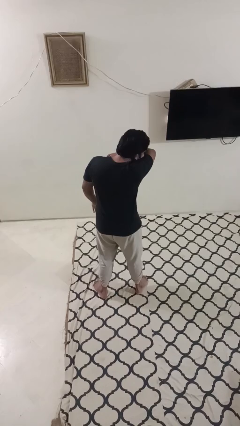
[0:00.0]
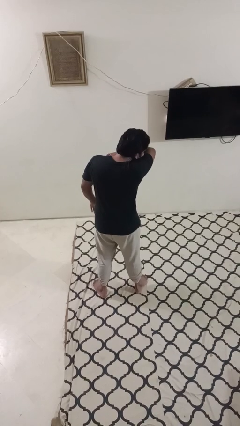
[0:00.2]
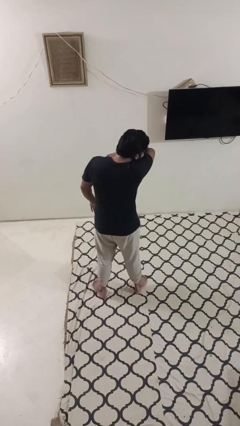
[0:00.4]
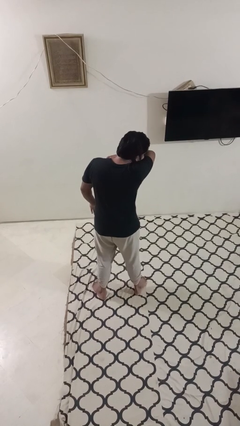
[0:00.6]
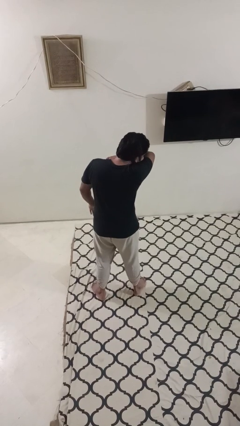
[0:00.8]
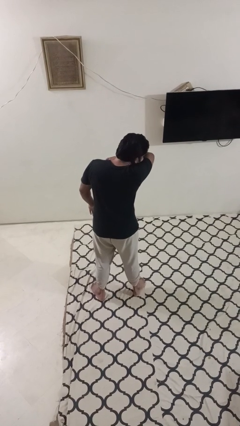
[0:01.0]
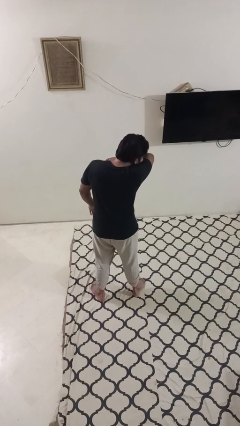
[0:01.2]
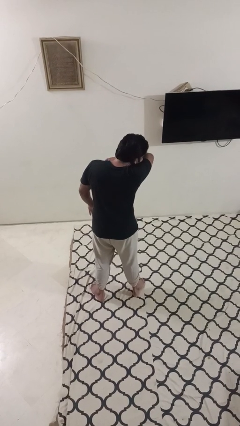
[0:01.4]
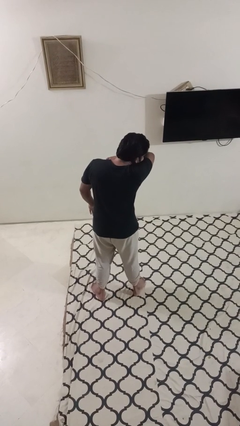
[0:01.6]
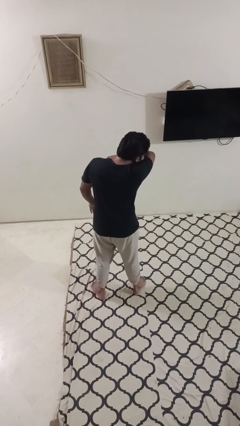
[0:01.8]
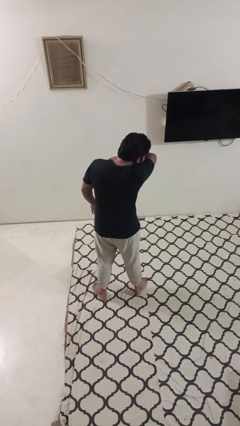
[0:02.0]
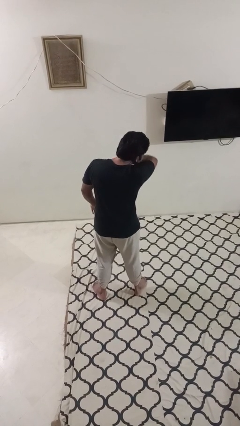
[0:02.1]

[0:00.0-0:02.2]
person sneezes into arm

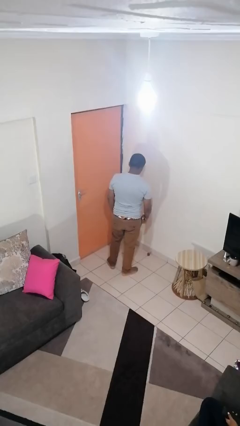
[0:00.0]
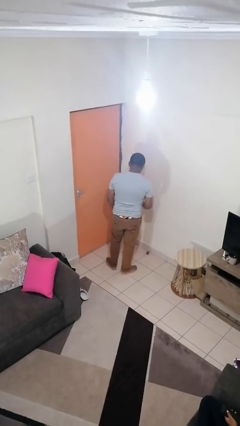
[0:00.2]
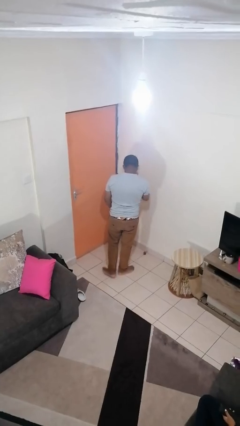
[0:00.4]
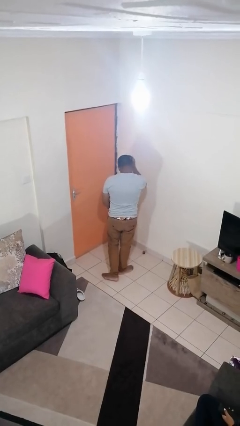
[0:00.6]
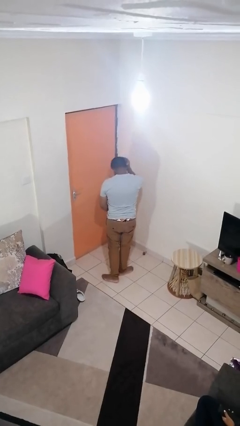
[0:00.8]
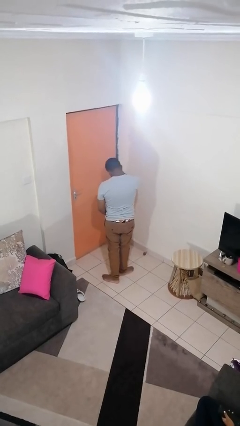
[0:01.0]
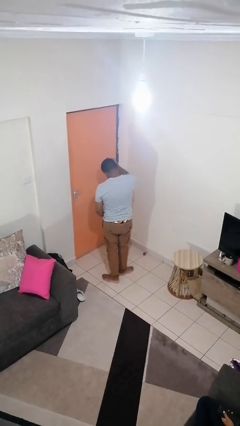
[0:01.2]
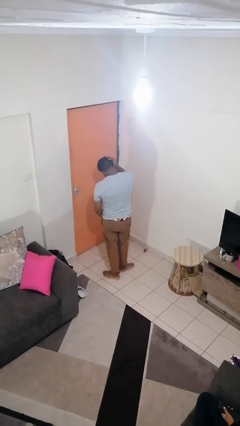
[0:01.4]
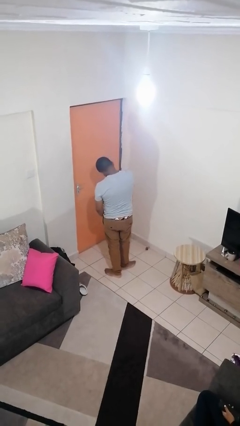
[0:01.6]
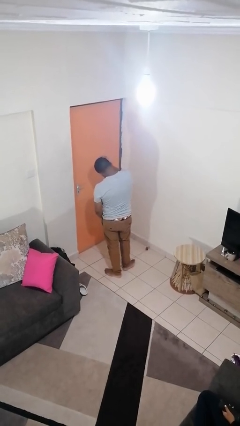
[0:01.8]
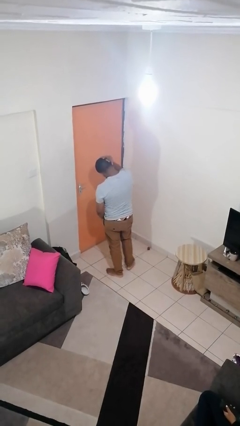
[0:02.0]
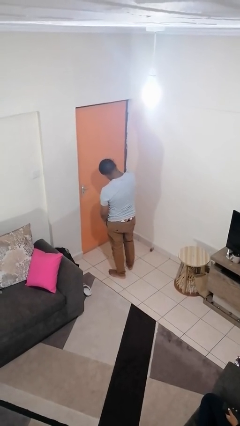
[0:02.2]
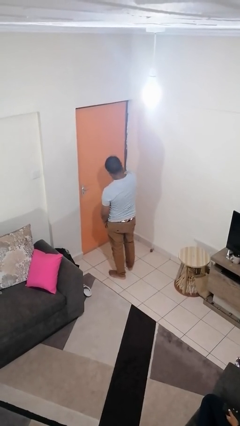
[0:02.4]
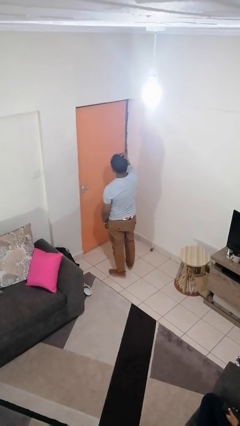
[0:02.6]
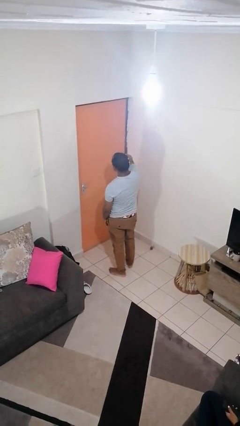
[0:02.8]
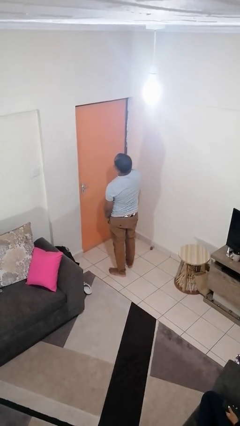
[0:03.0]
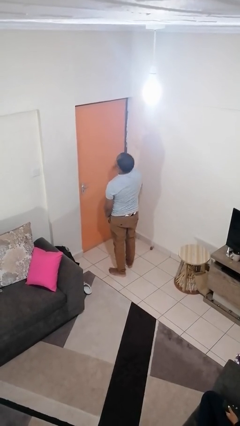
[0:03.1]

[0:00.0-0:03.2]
person strokes hair

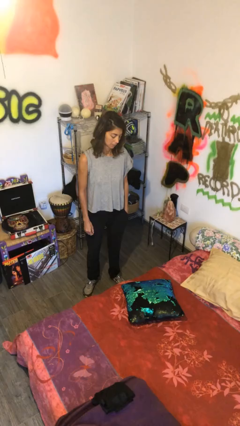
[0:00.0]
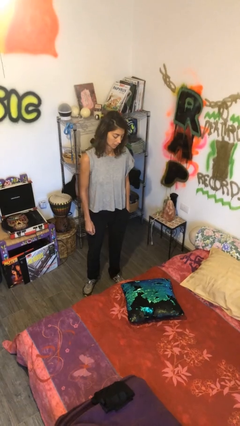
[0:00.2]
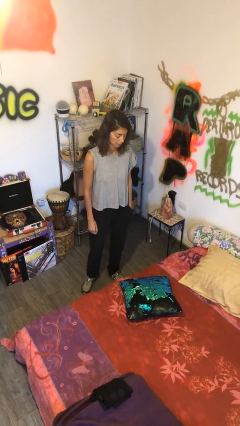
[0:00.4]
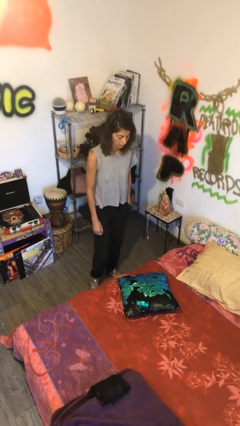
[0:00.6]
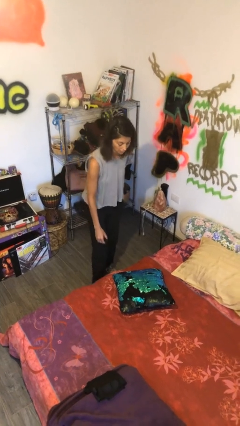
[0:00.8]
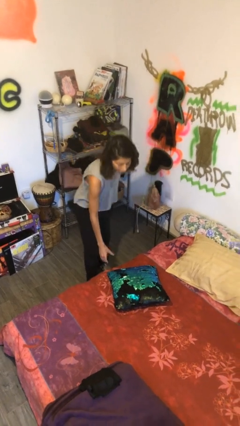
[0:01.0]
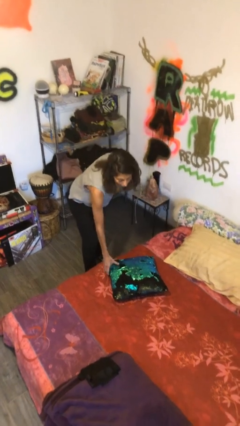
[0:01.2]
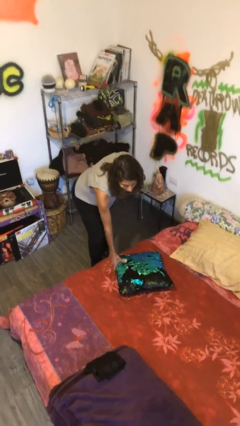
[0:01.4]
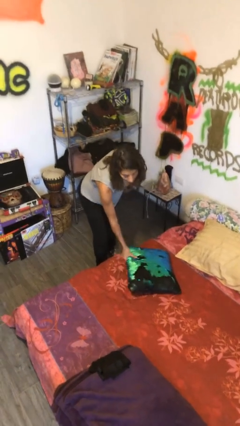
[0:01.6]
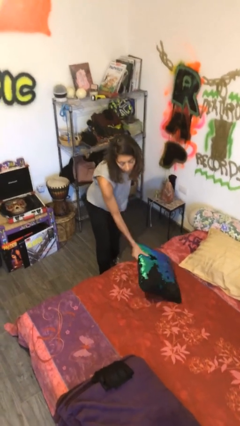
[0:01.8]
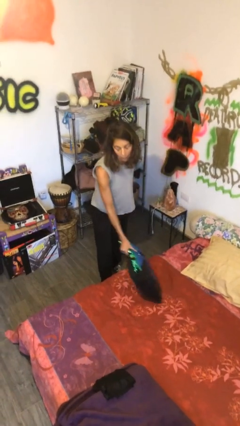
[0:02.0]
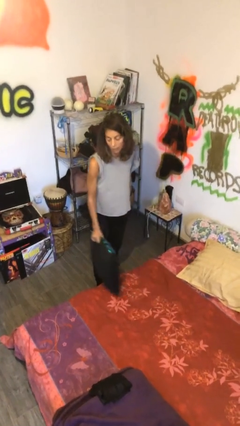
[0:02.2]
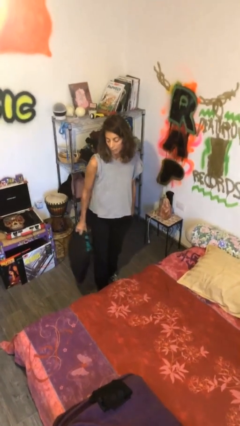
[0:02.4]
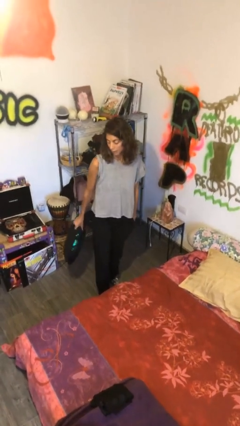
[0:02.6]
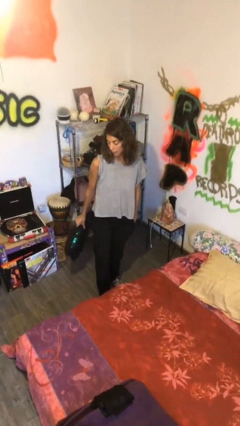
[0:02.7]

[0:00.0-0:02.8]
person picks up object from bed

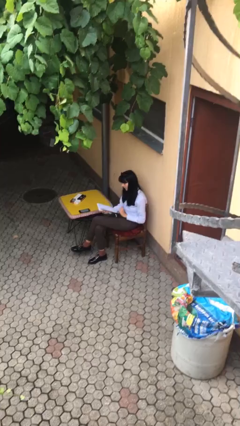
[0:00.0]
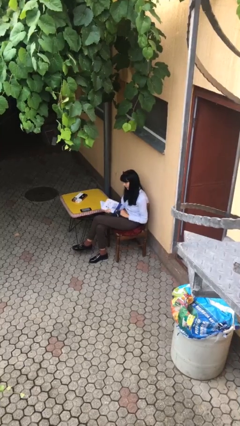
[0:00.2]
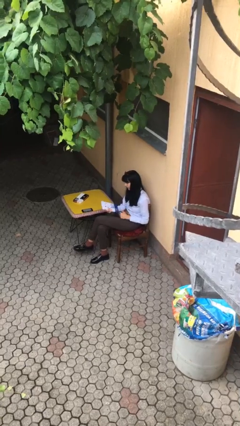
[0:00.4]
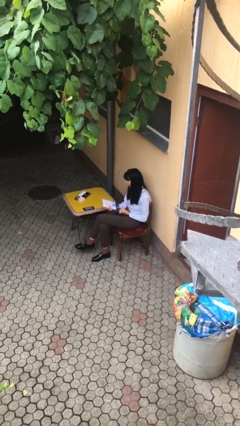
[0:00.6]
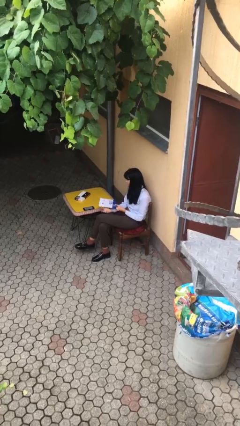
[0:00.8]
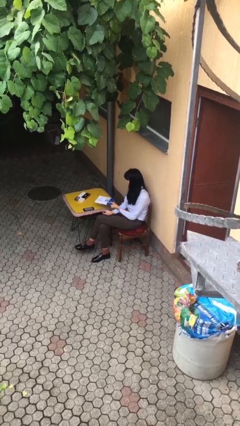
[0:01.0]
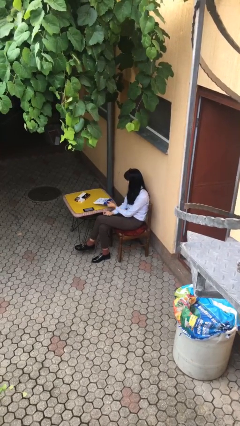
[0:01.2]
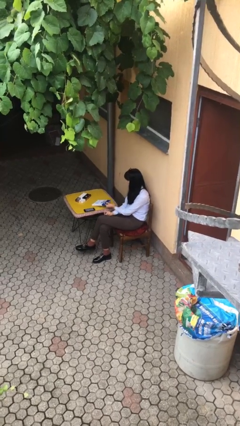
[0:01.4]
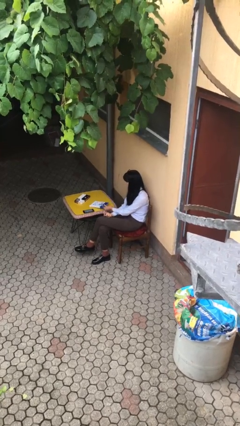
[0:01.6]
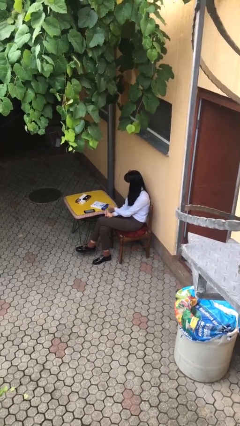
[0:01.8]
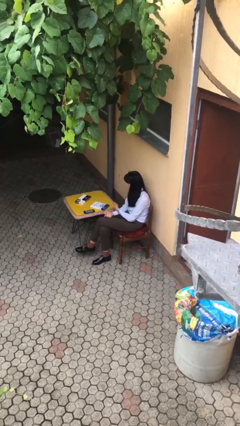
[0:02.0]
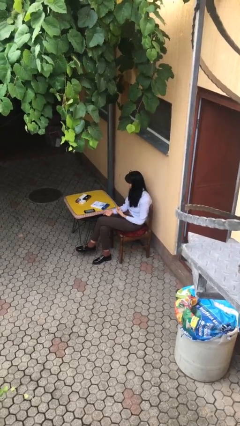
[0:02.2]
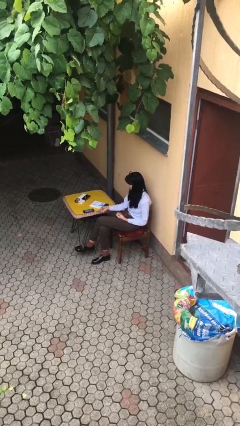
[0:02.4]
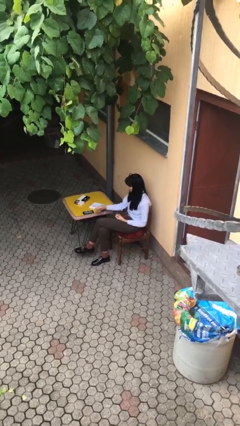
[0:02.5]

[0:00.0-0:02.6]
person puts down object on table

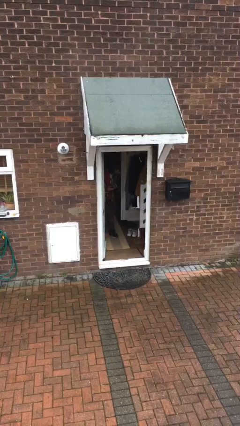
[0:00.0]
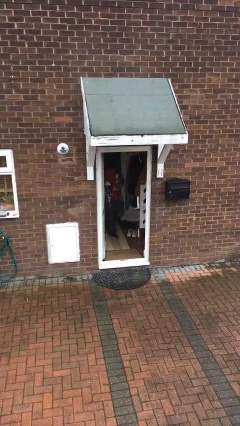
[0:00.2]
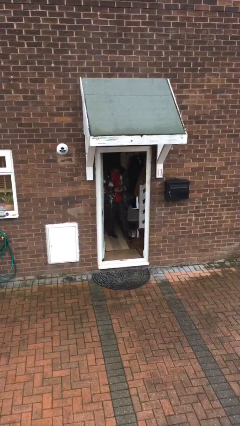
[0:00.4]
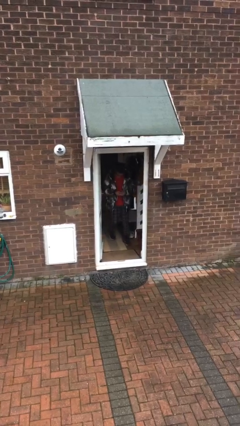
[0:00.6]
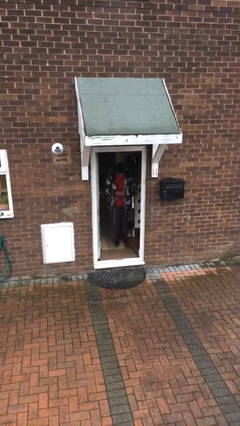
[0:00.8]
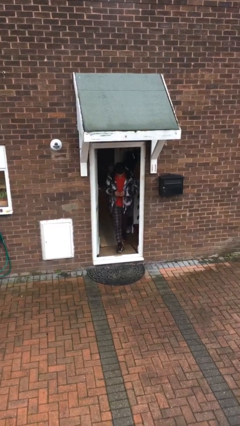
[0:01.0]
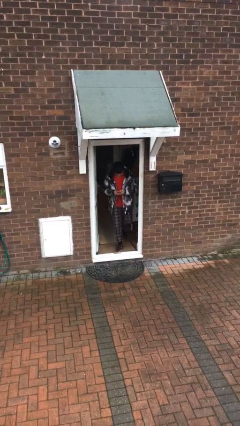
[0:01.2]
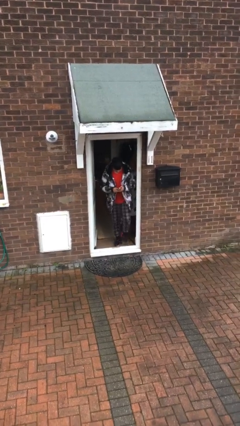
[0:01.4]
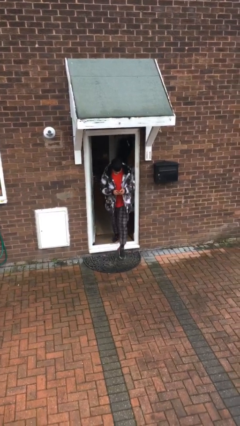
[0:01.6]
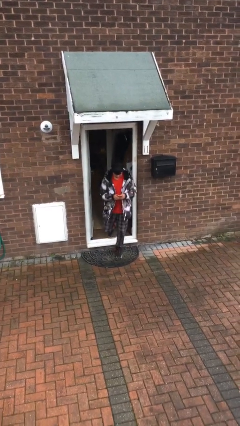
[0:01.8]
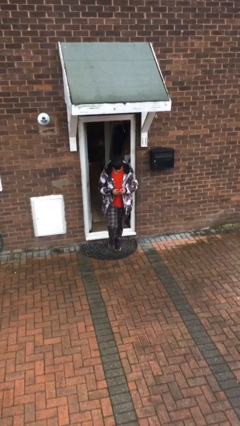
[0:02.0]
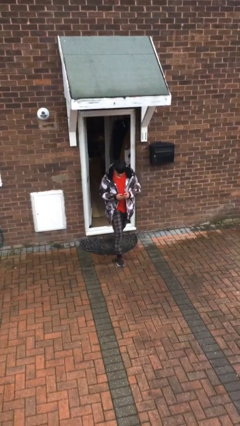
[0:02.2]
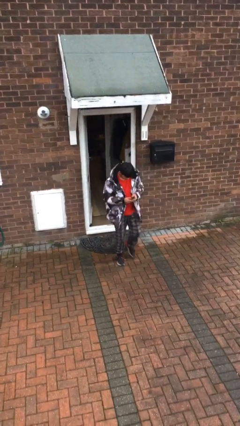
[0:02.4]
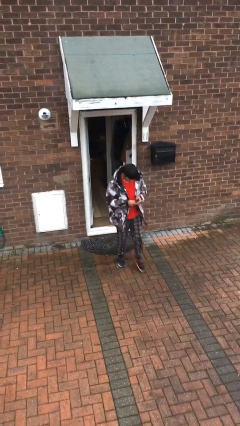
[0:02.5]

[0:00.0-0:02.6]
person enters scene through structure

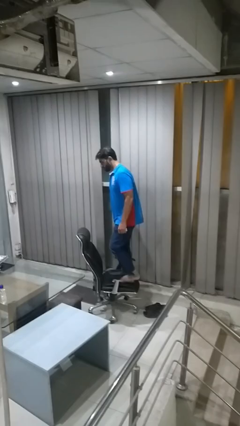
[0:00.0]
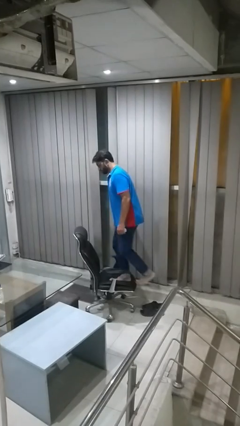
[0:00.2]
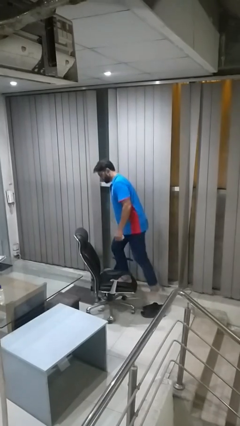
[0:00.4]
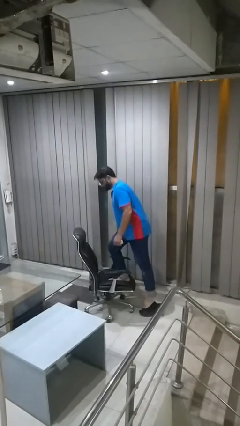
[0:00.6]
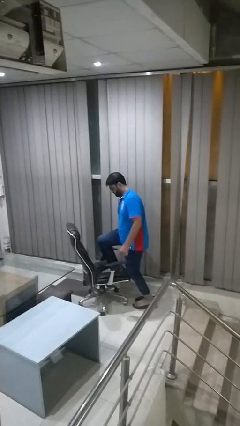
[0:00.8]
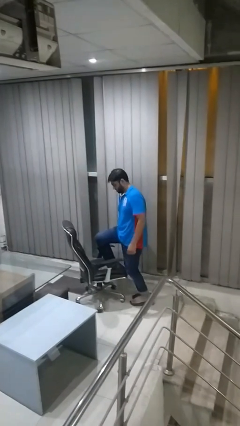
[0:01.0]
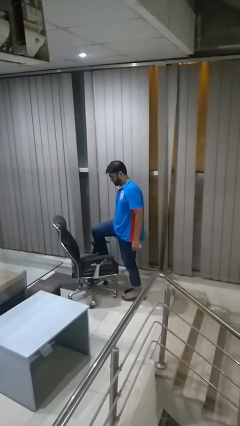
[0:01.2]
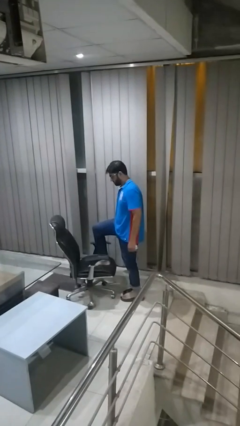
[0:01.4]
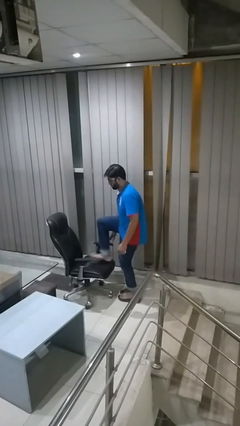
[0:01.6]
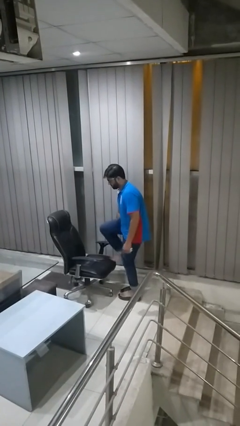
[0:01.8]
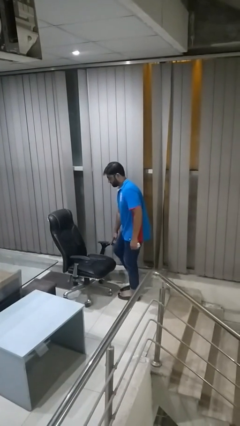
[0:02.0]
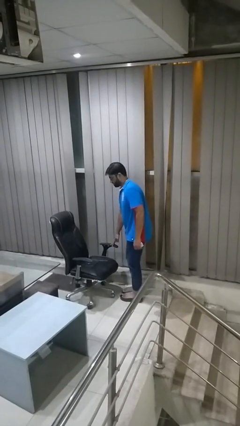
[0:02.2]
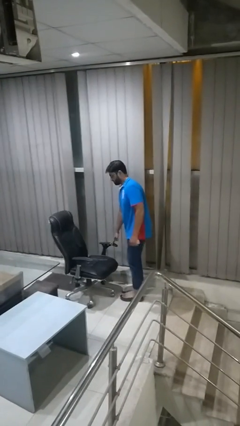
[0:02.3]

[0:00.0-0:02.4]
person climbs off chair

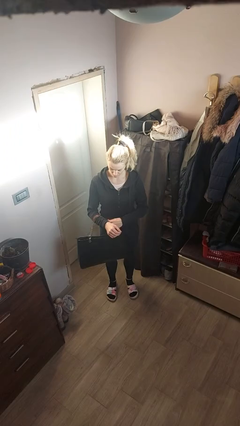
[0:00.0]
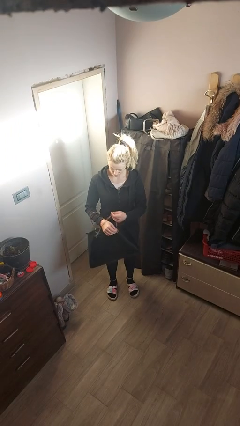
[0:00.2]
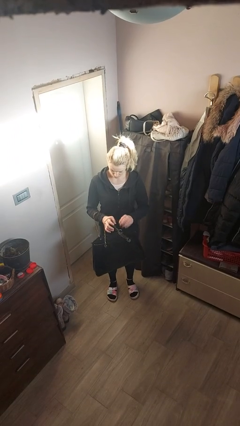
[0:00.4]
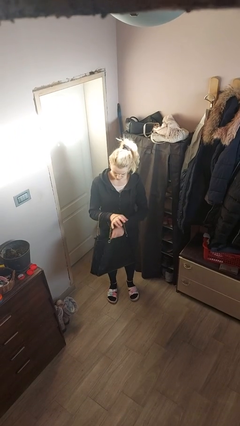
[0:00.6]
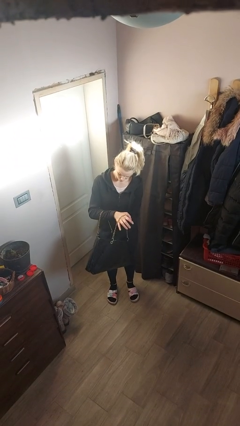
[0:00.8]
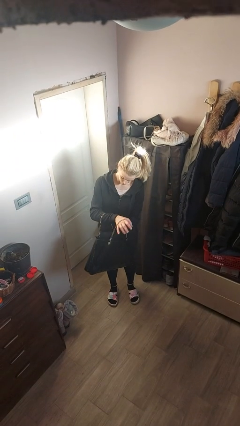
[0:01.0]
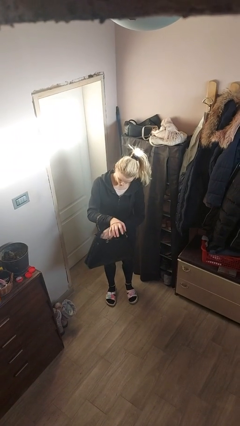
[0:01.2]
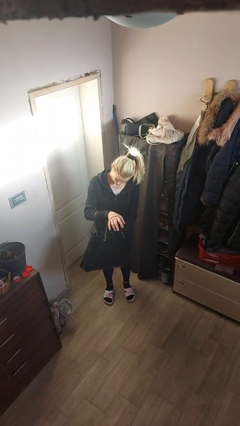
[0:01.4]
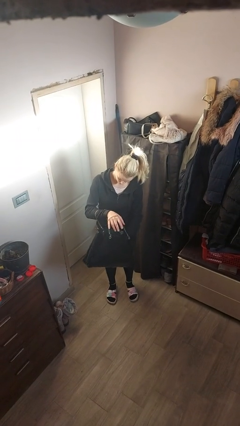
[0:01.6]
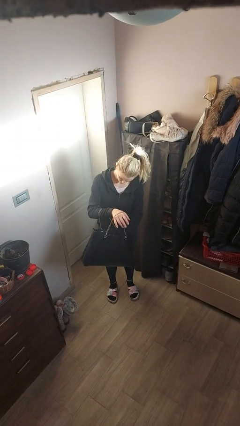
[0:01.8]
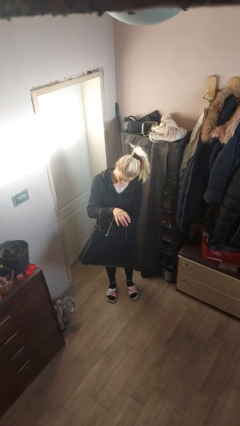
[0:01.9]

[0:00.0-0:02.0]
person searches in purse
